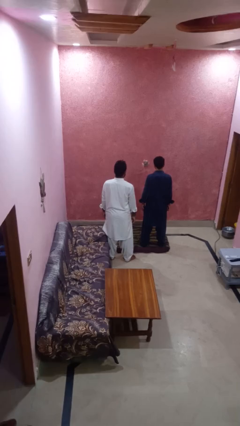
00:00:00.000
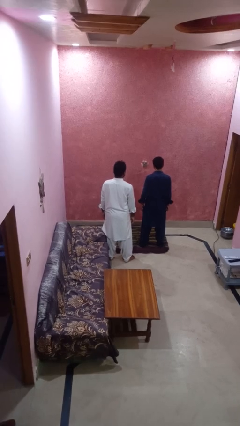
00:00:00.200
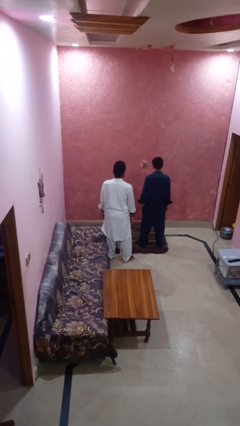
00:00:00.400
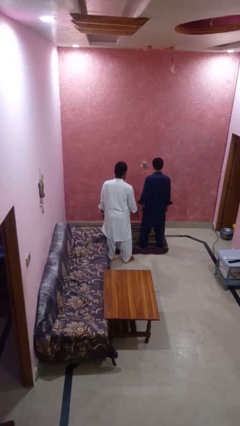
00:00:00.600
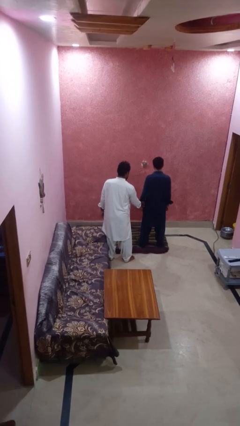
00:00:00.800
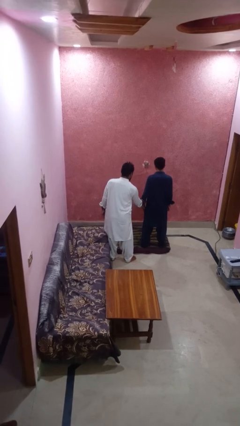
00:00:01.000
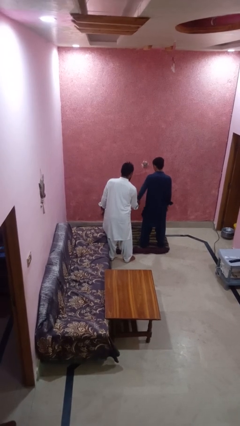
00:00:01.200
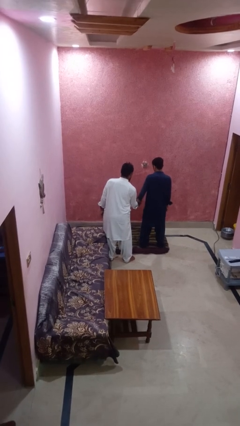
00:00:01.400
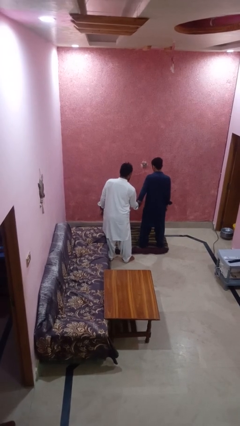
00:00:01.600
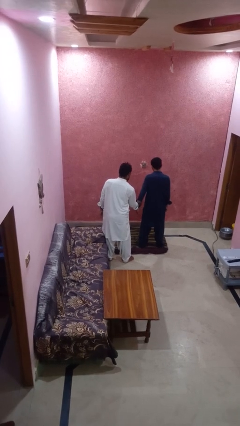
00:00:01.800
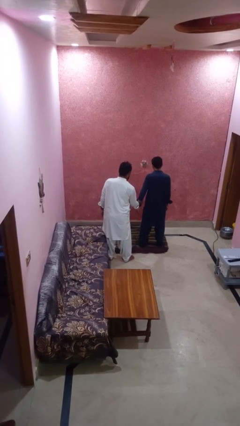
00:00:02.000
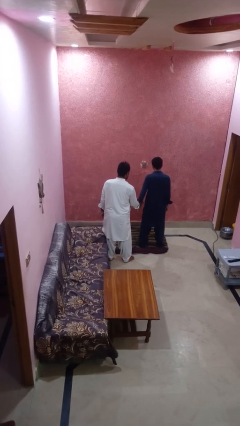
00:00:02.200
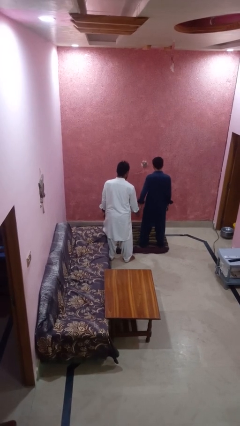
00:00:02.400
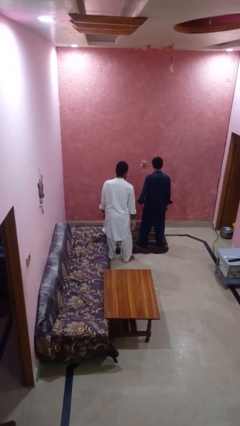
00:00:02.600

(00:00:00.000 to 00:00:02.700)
person grabs person by bicep

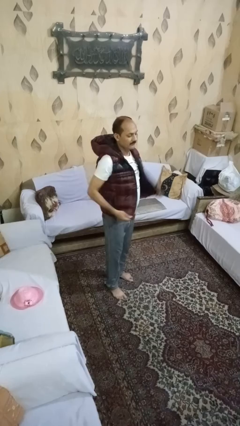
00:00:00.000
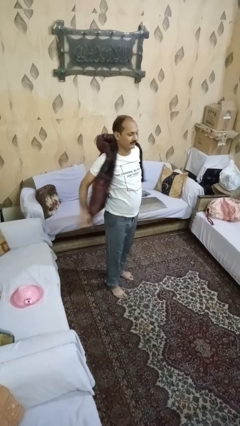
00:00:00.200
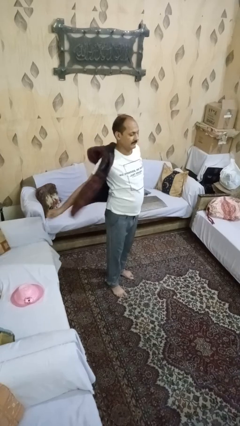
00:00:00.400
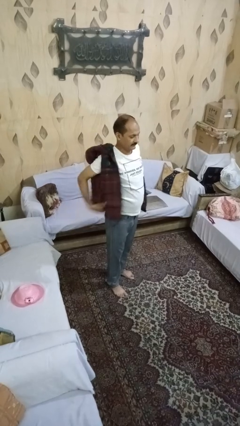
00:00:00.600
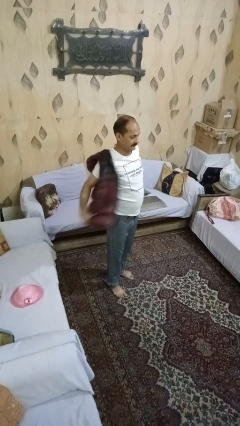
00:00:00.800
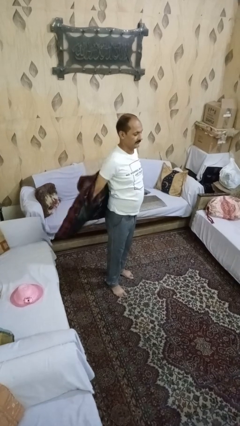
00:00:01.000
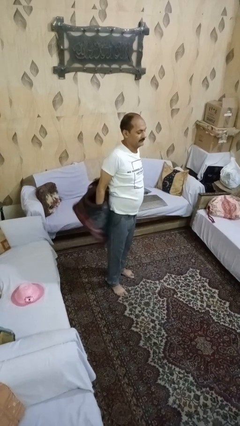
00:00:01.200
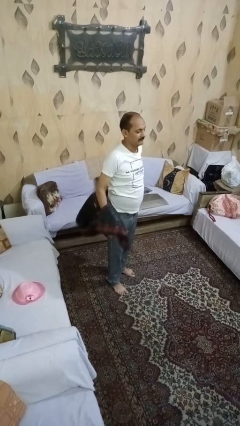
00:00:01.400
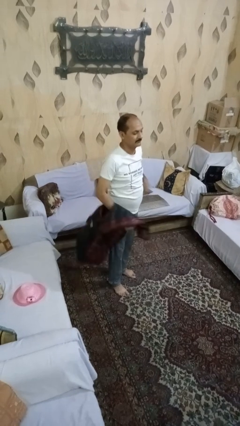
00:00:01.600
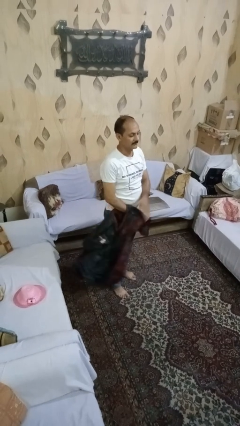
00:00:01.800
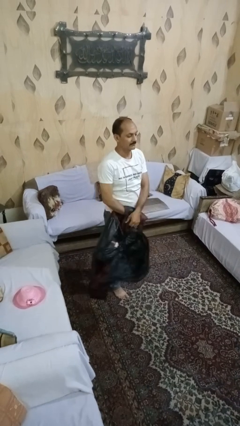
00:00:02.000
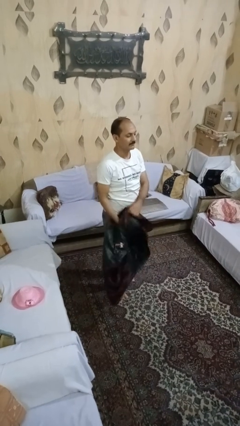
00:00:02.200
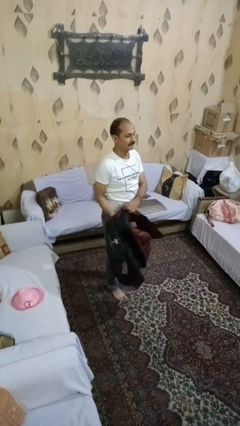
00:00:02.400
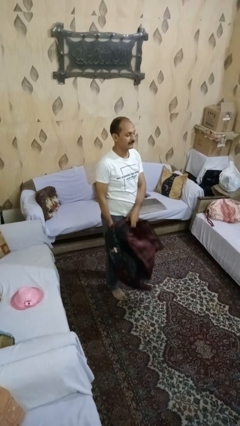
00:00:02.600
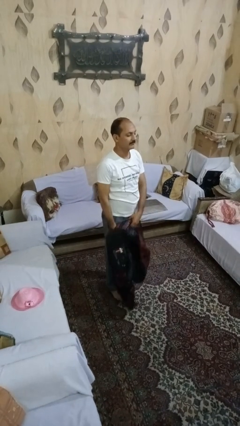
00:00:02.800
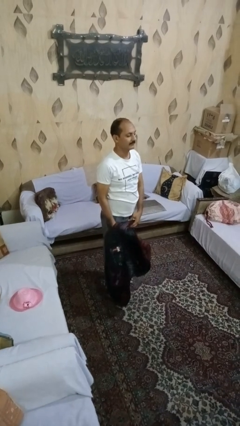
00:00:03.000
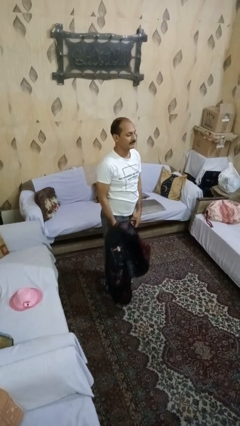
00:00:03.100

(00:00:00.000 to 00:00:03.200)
person takes off jacket

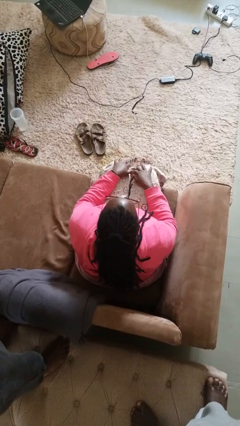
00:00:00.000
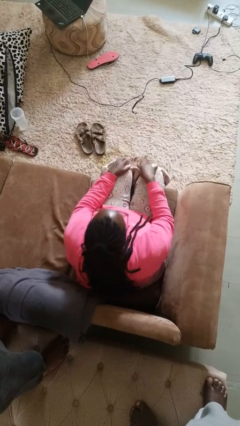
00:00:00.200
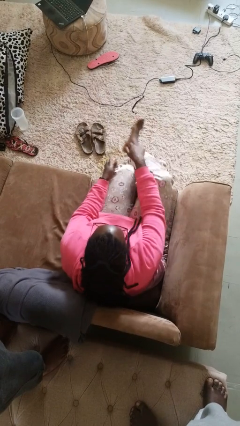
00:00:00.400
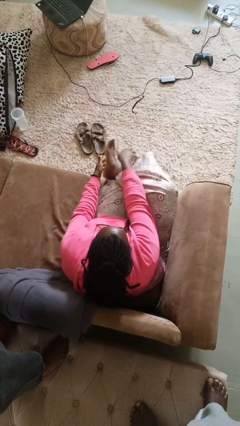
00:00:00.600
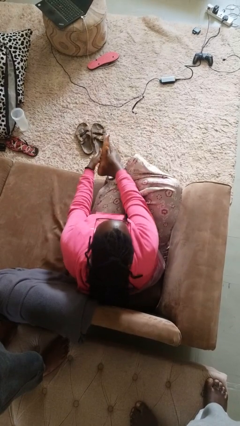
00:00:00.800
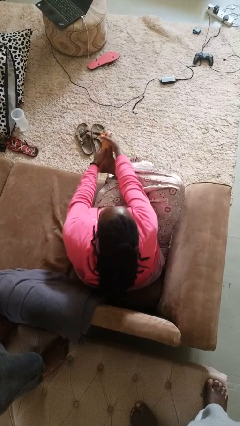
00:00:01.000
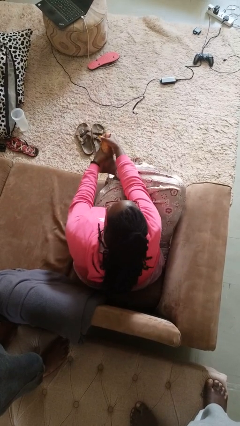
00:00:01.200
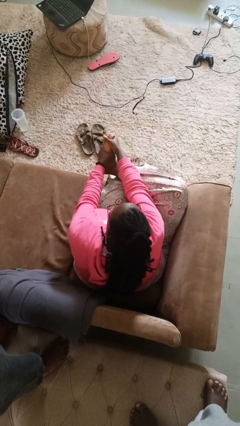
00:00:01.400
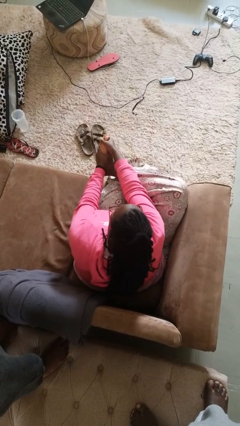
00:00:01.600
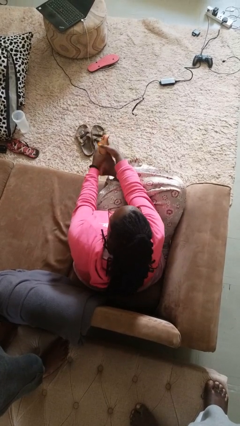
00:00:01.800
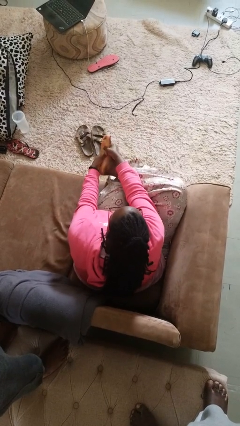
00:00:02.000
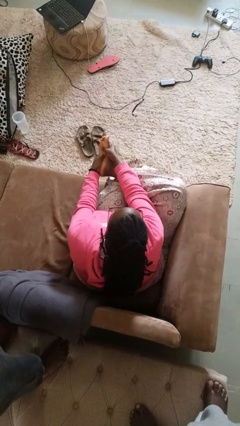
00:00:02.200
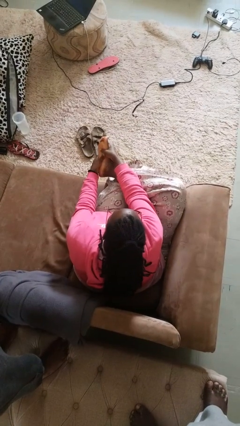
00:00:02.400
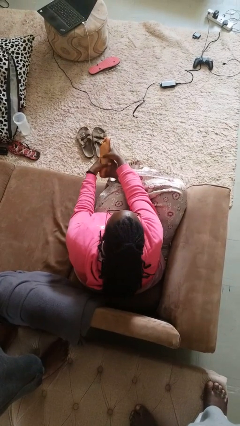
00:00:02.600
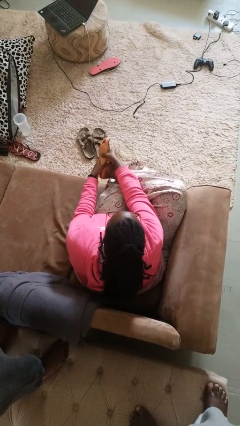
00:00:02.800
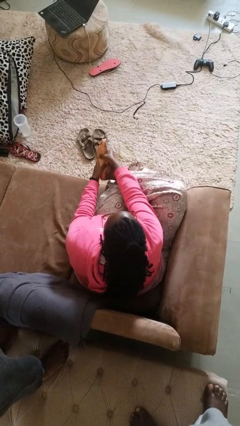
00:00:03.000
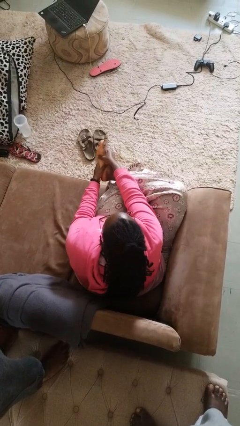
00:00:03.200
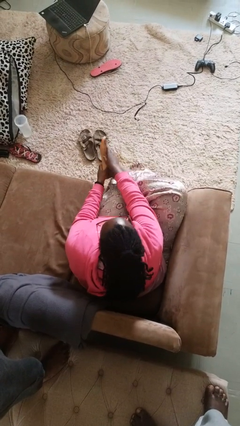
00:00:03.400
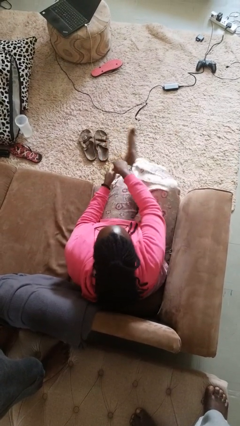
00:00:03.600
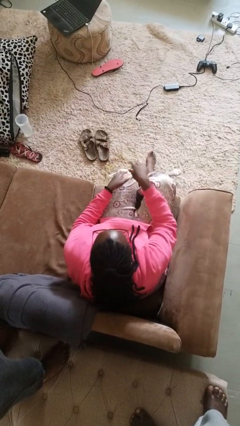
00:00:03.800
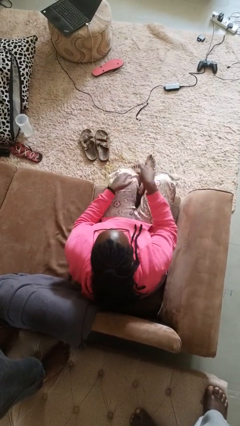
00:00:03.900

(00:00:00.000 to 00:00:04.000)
person rubs foot

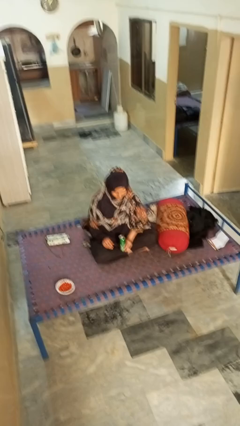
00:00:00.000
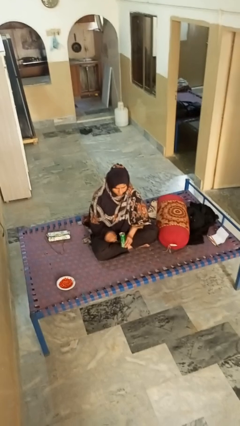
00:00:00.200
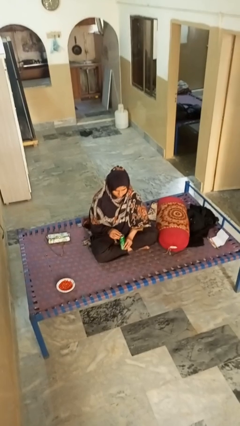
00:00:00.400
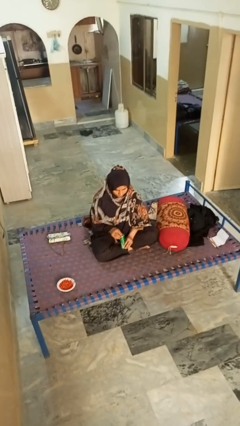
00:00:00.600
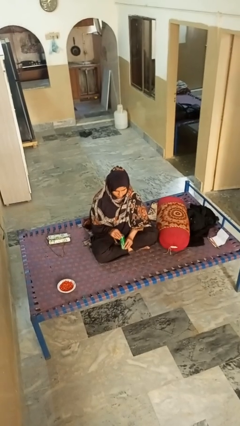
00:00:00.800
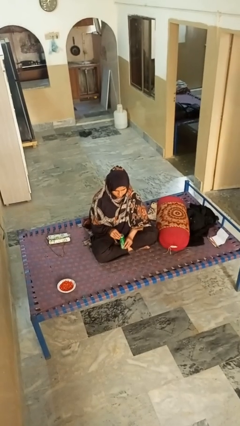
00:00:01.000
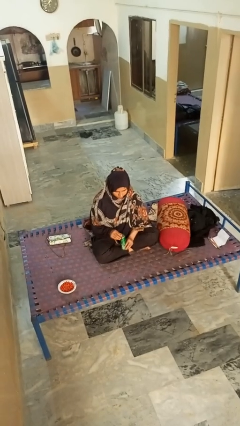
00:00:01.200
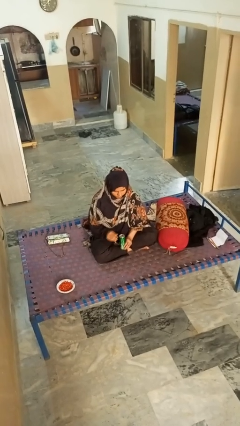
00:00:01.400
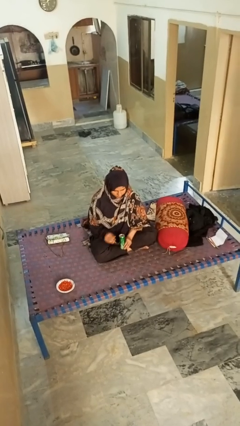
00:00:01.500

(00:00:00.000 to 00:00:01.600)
person opens can with can opener

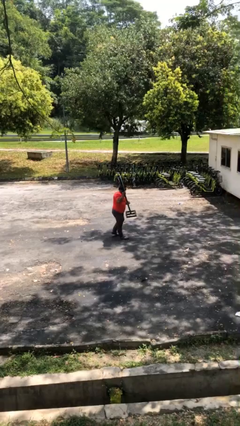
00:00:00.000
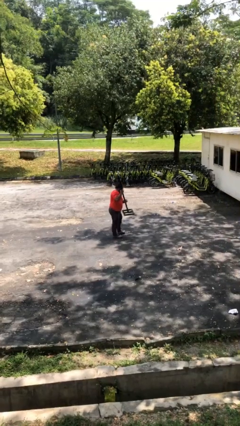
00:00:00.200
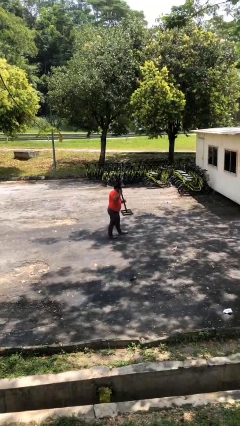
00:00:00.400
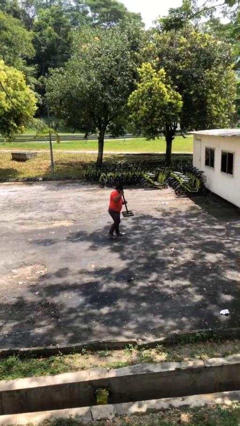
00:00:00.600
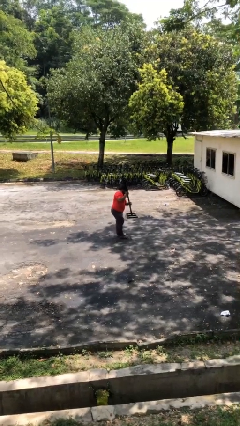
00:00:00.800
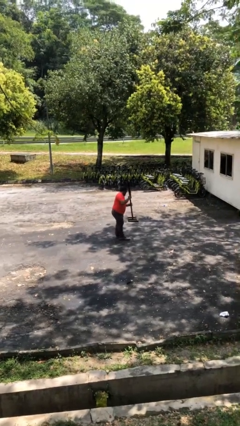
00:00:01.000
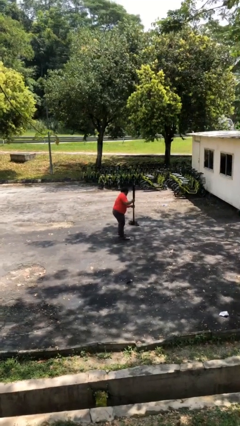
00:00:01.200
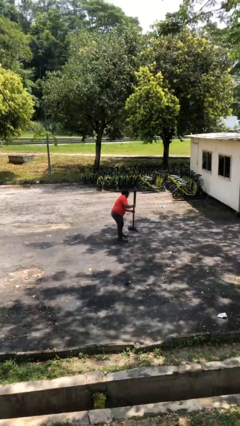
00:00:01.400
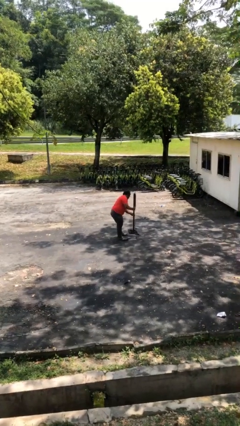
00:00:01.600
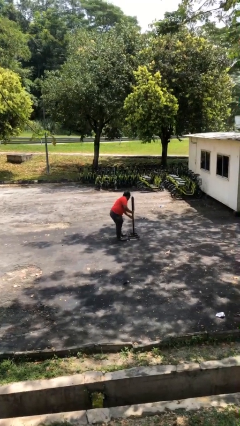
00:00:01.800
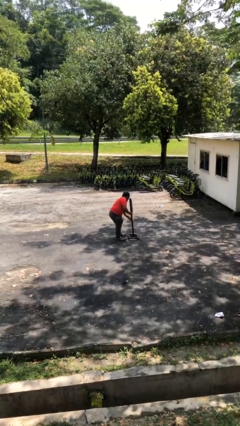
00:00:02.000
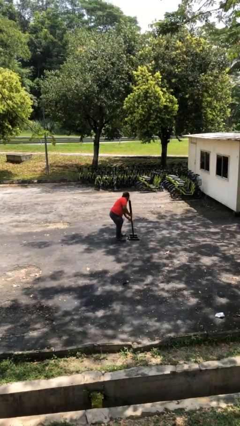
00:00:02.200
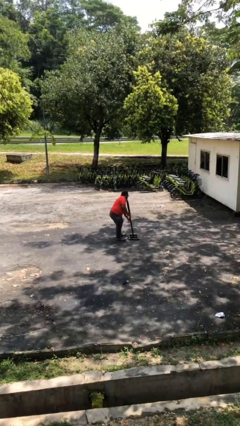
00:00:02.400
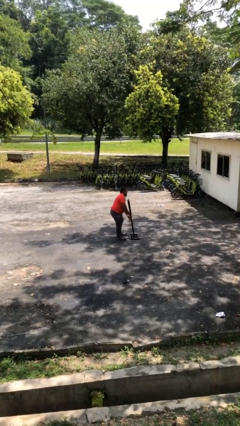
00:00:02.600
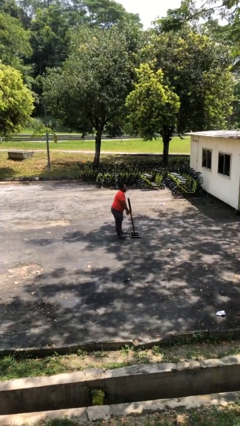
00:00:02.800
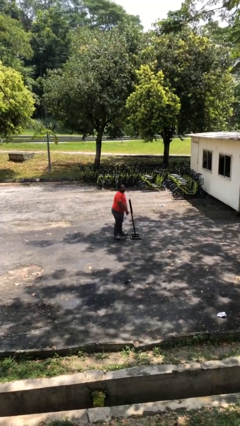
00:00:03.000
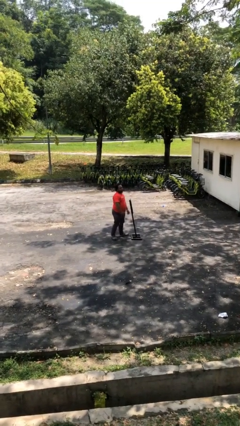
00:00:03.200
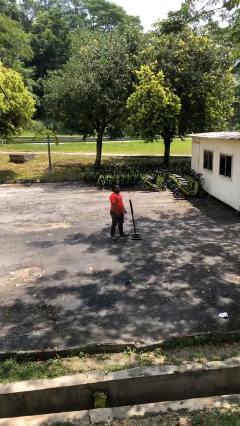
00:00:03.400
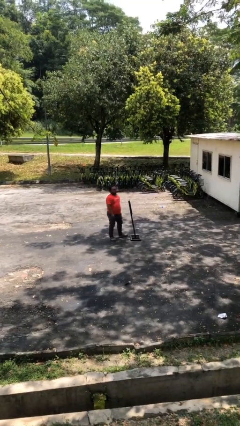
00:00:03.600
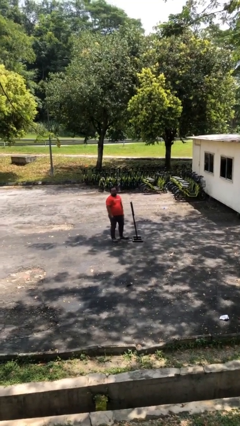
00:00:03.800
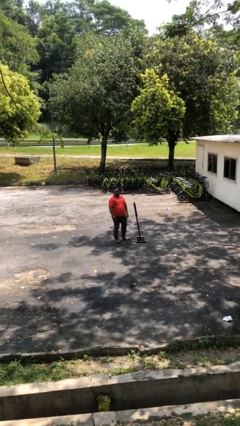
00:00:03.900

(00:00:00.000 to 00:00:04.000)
person puts down object on floor

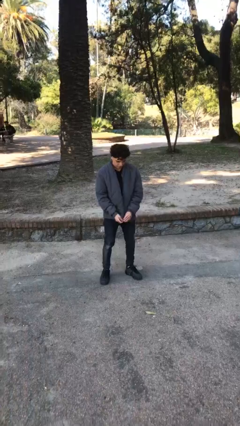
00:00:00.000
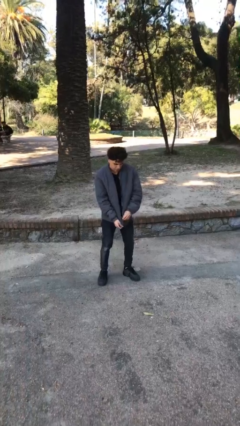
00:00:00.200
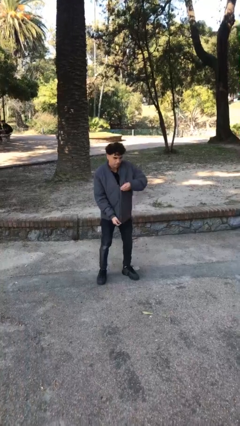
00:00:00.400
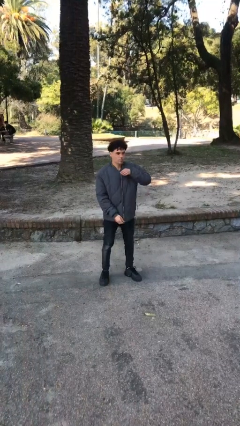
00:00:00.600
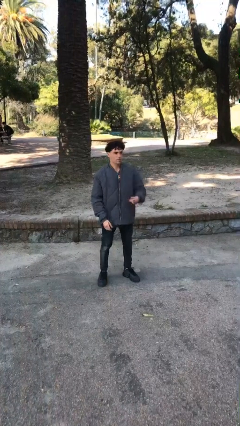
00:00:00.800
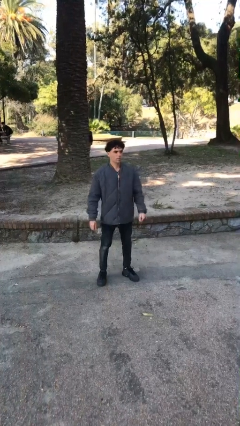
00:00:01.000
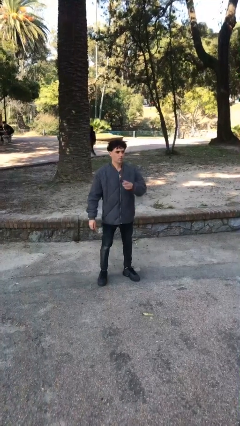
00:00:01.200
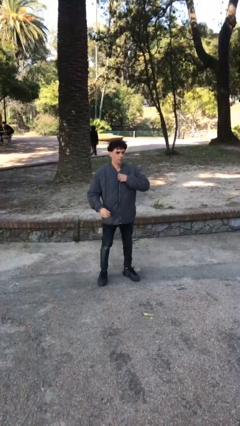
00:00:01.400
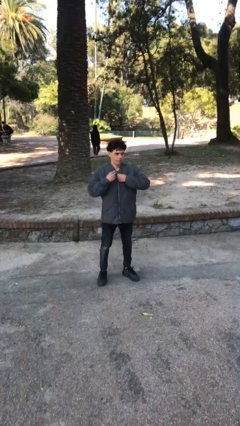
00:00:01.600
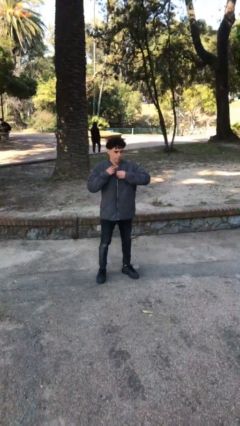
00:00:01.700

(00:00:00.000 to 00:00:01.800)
person zips up jacket

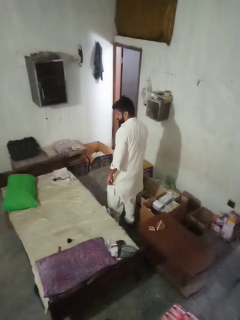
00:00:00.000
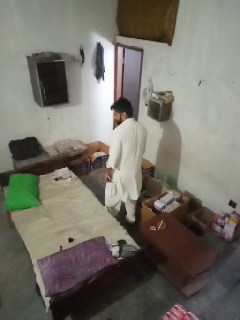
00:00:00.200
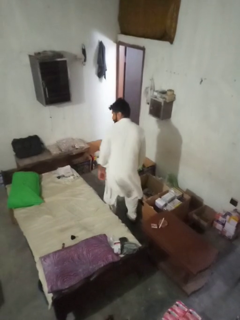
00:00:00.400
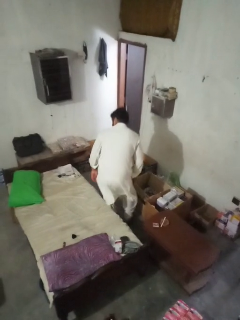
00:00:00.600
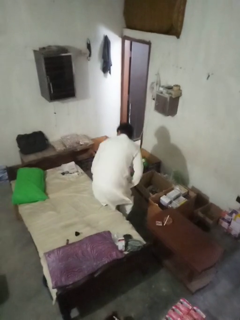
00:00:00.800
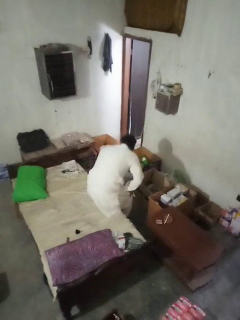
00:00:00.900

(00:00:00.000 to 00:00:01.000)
person lies down on bed
